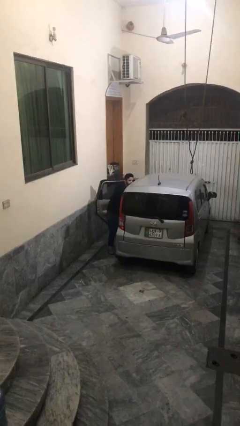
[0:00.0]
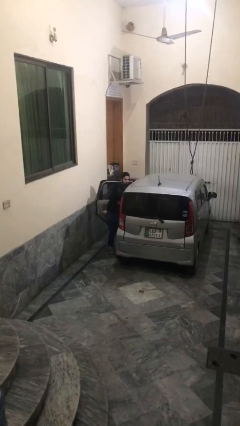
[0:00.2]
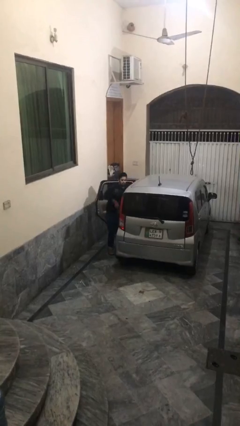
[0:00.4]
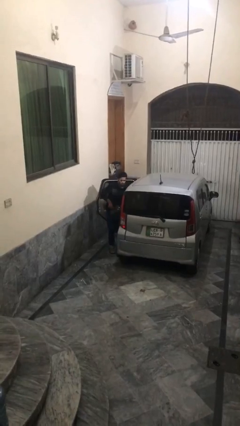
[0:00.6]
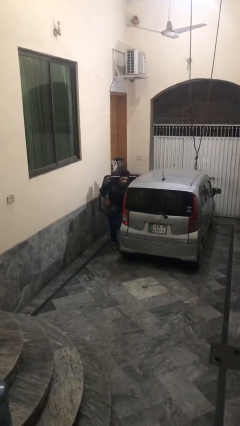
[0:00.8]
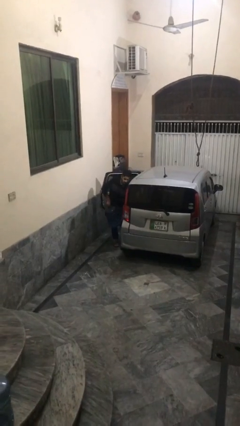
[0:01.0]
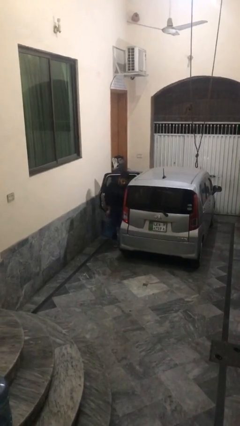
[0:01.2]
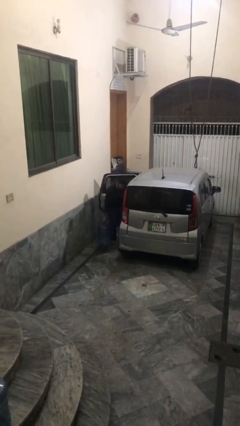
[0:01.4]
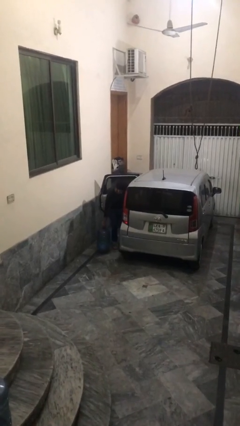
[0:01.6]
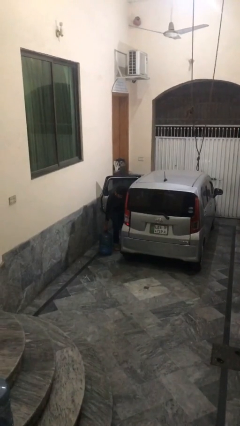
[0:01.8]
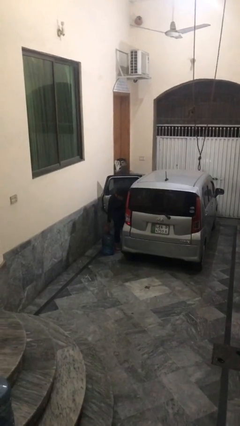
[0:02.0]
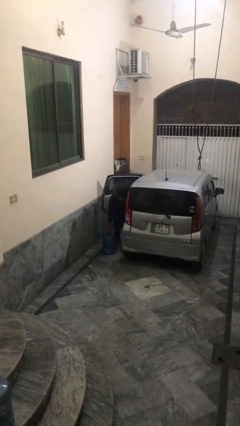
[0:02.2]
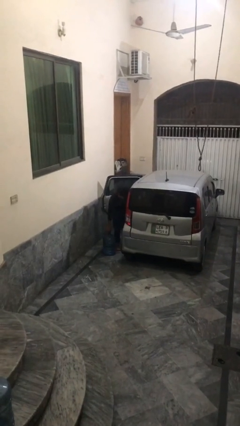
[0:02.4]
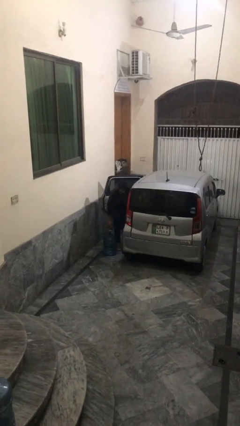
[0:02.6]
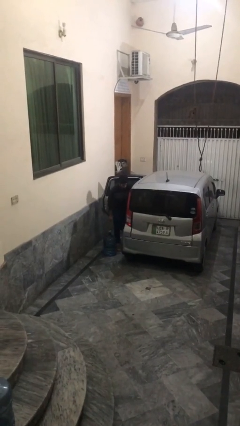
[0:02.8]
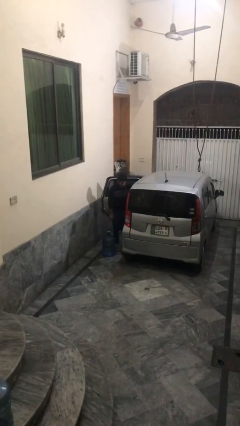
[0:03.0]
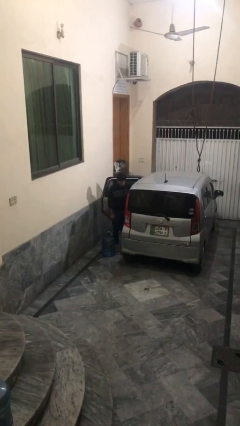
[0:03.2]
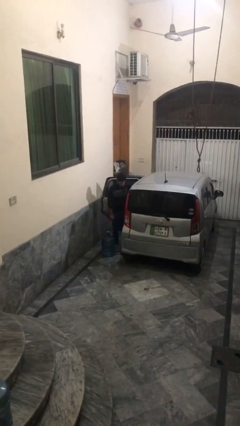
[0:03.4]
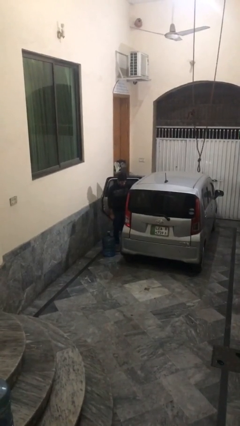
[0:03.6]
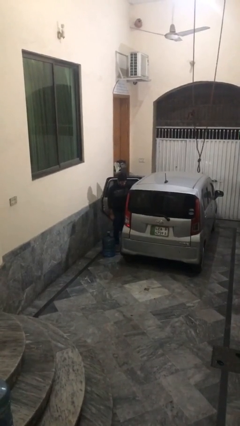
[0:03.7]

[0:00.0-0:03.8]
person unloads car

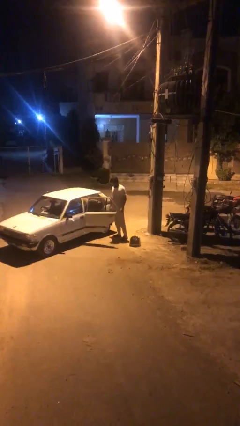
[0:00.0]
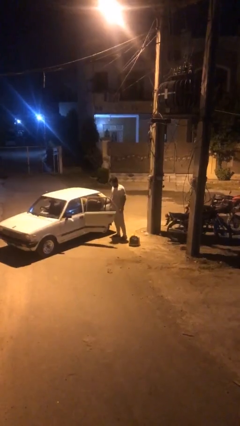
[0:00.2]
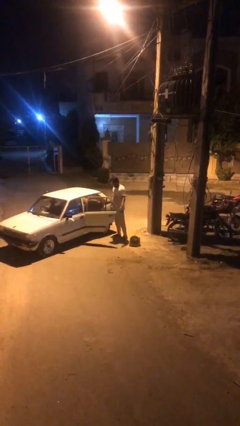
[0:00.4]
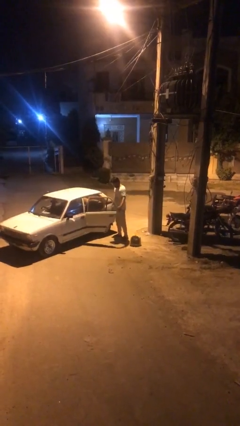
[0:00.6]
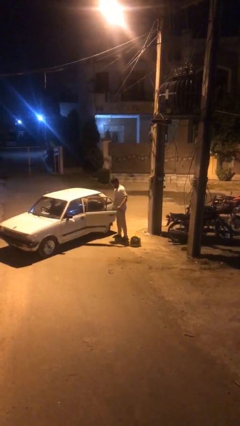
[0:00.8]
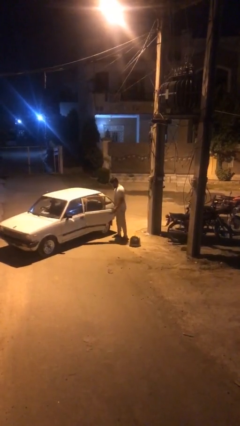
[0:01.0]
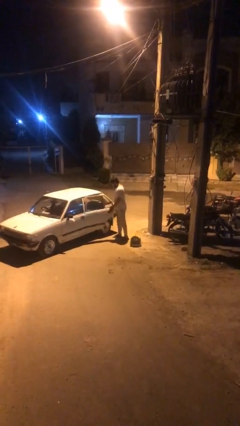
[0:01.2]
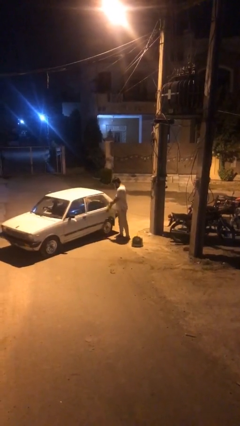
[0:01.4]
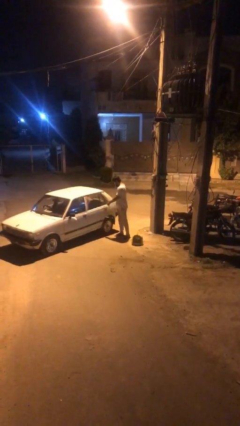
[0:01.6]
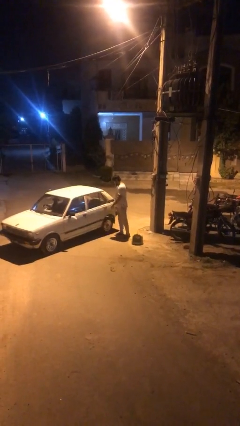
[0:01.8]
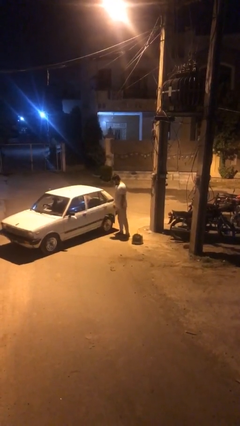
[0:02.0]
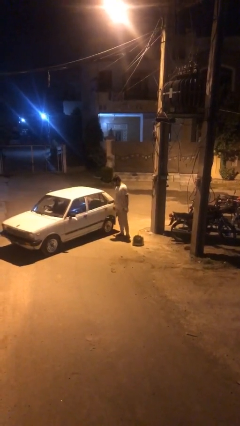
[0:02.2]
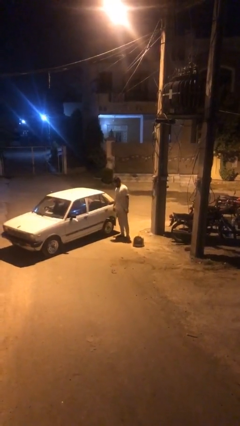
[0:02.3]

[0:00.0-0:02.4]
person closes car door

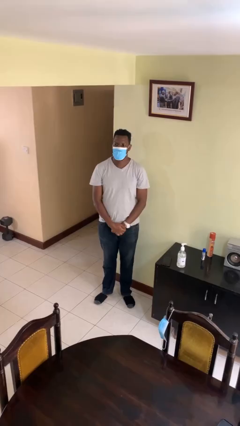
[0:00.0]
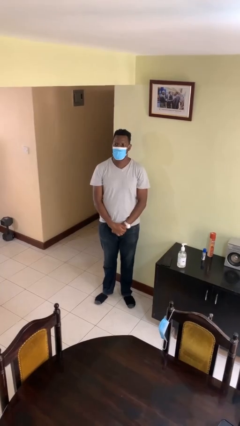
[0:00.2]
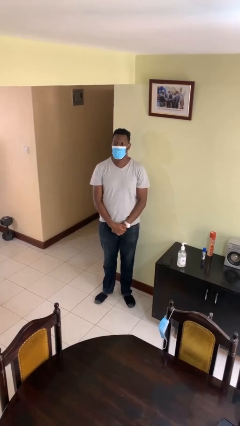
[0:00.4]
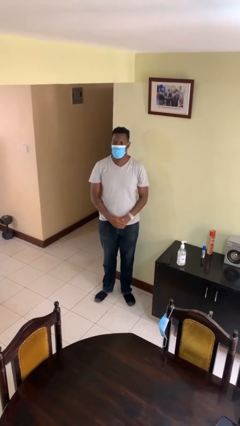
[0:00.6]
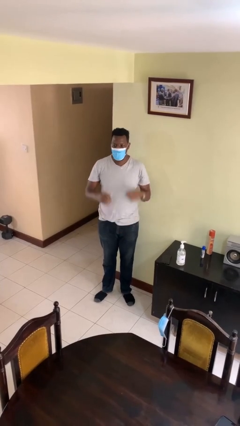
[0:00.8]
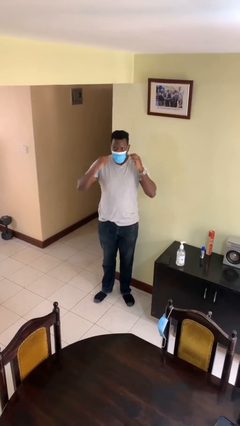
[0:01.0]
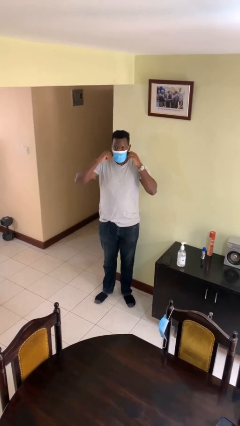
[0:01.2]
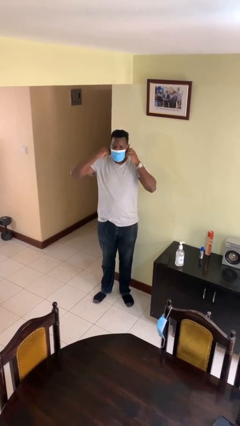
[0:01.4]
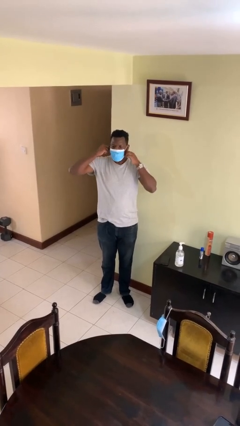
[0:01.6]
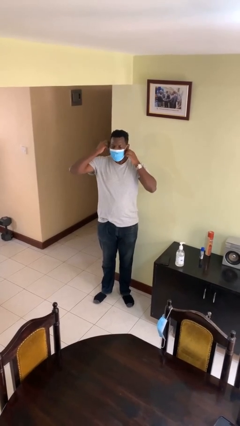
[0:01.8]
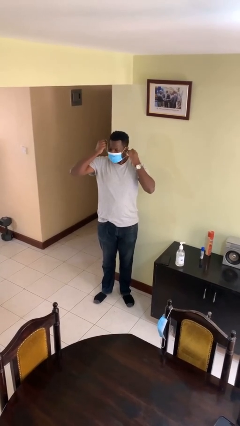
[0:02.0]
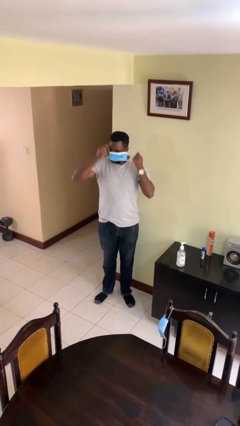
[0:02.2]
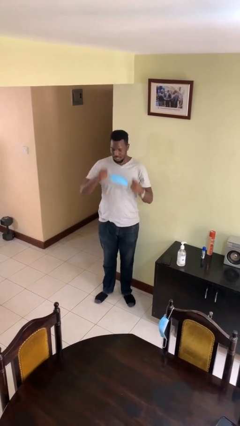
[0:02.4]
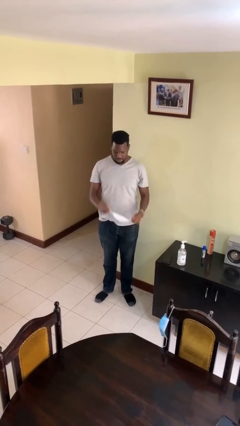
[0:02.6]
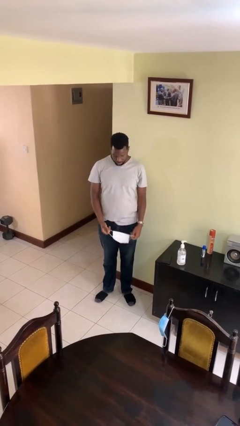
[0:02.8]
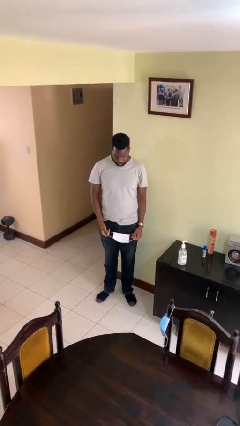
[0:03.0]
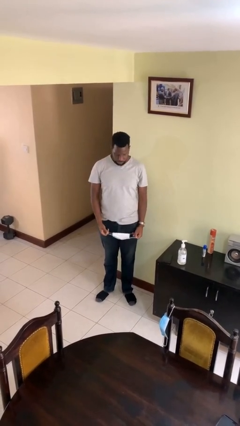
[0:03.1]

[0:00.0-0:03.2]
person takes off facemask

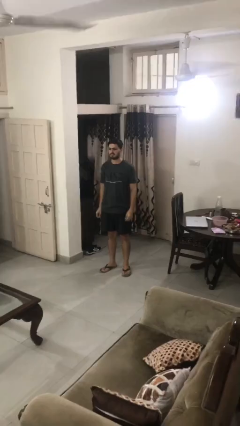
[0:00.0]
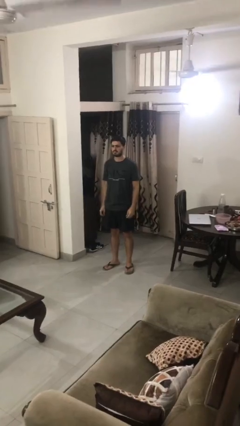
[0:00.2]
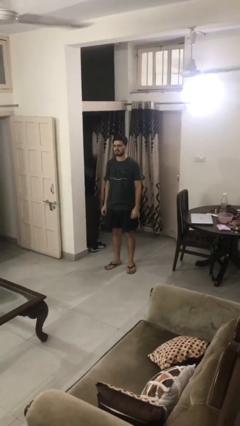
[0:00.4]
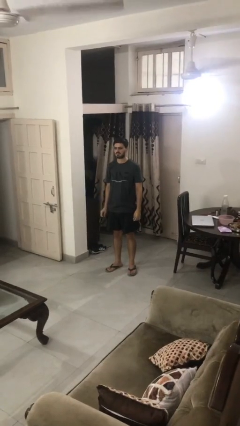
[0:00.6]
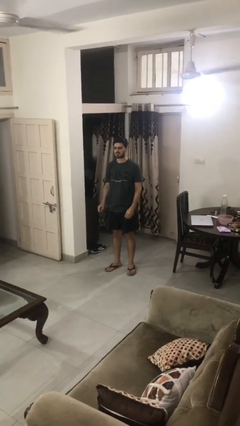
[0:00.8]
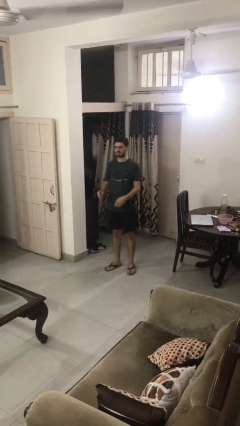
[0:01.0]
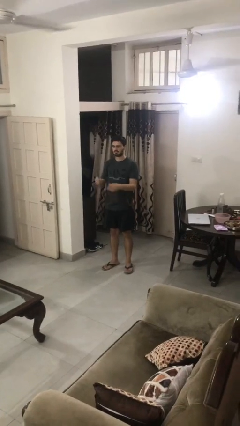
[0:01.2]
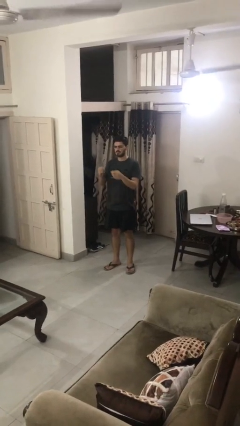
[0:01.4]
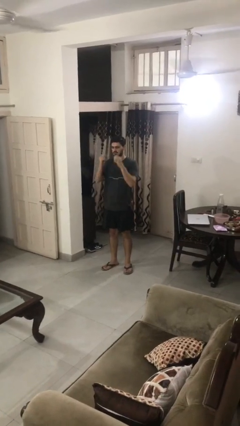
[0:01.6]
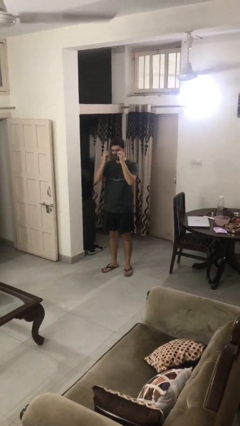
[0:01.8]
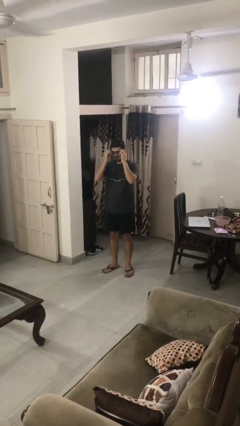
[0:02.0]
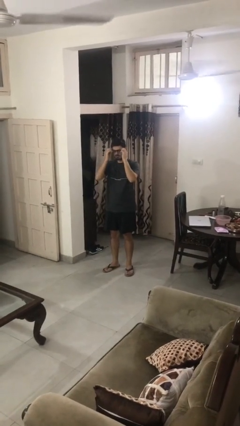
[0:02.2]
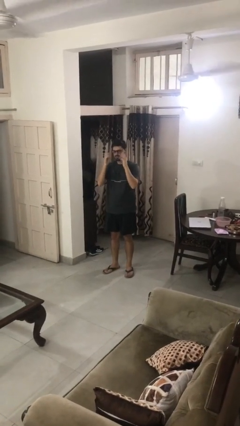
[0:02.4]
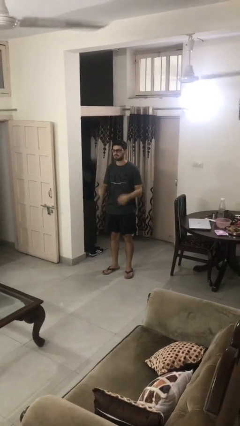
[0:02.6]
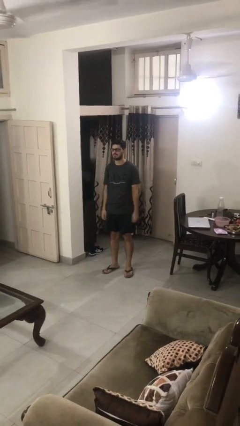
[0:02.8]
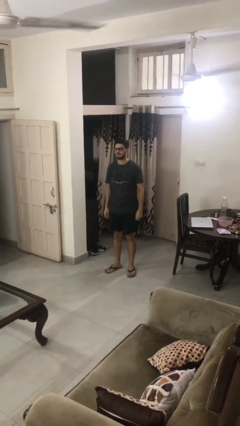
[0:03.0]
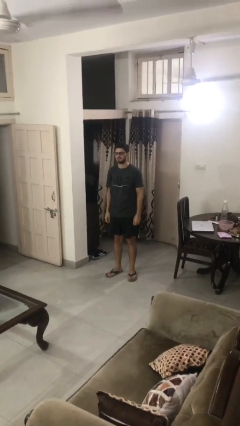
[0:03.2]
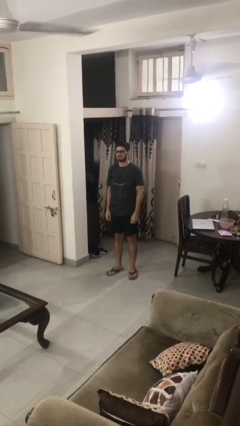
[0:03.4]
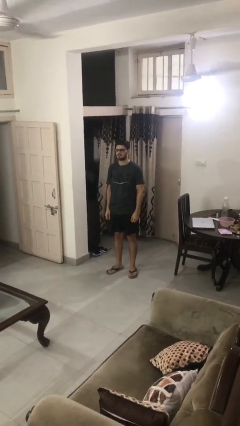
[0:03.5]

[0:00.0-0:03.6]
person puts on glasses

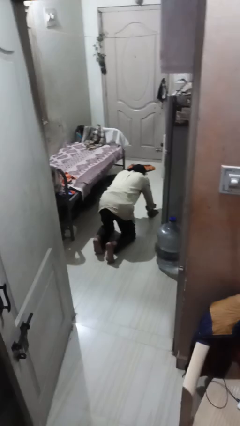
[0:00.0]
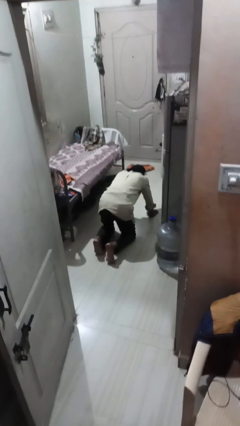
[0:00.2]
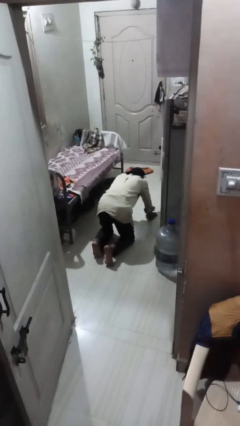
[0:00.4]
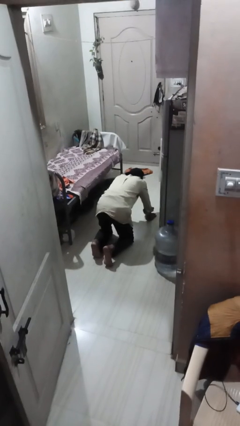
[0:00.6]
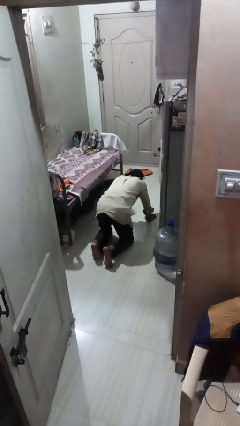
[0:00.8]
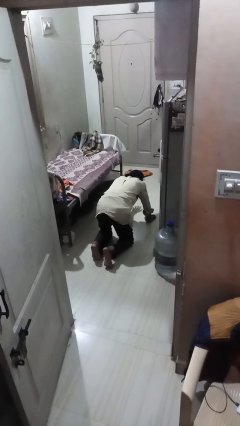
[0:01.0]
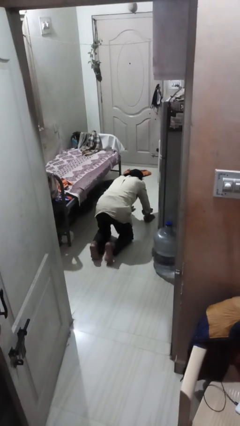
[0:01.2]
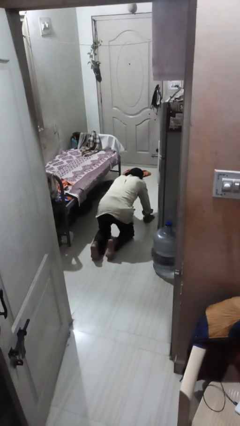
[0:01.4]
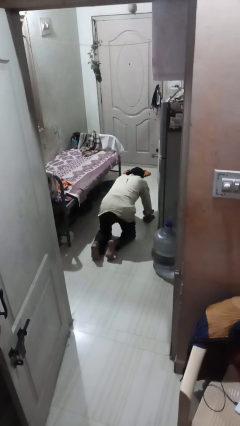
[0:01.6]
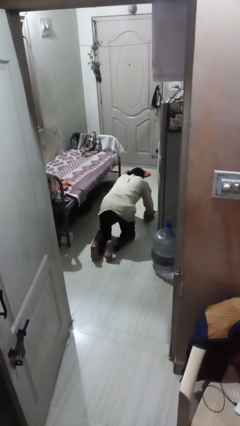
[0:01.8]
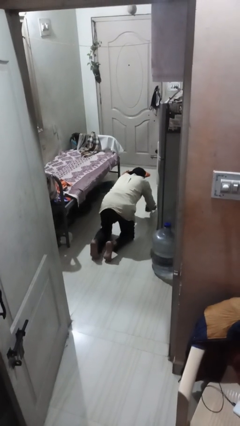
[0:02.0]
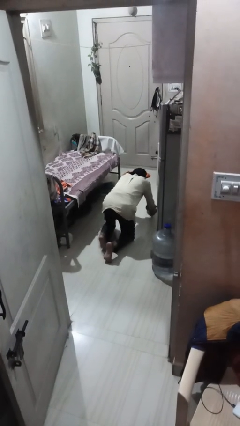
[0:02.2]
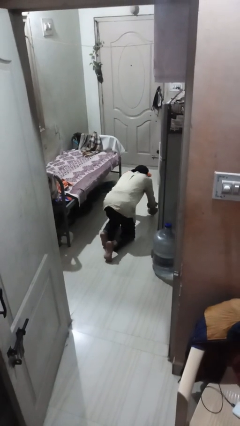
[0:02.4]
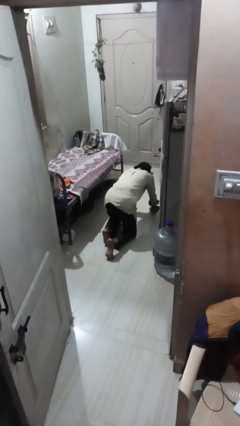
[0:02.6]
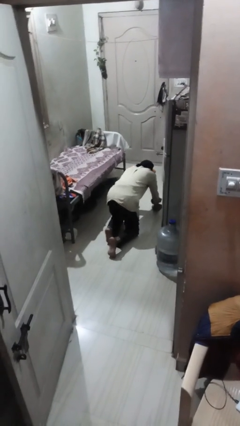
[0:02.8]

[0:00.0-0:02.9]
person crawls

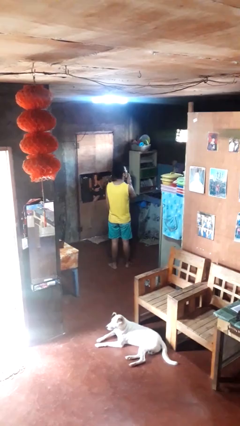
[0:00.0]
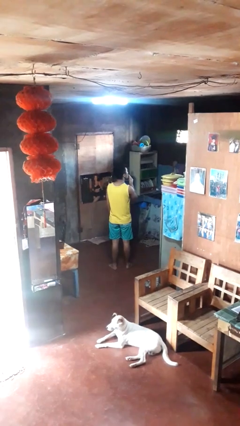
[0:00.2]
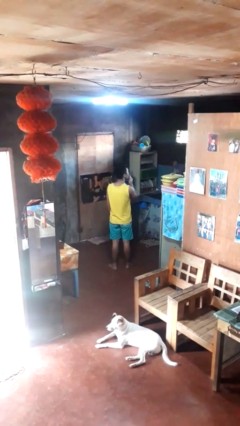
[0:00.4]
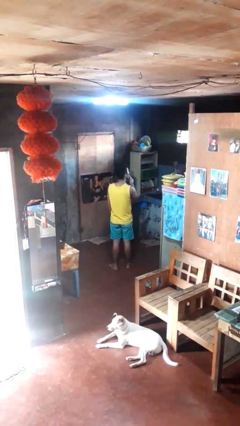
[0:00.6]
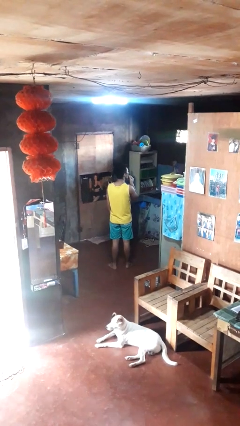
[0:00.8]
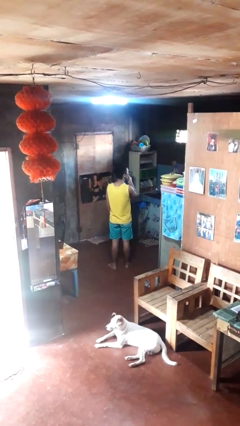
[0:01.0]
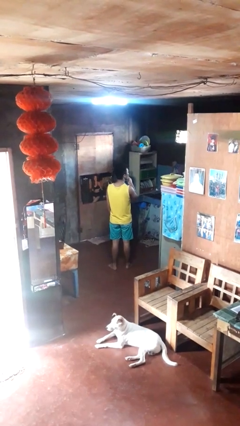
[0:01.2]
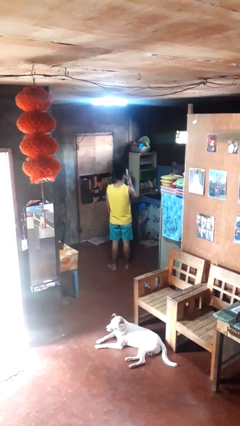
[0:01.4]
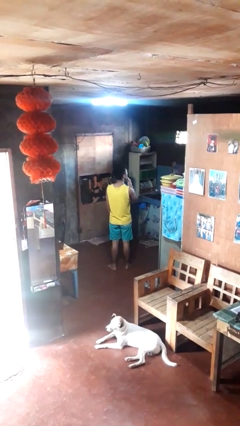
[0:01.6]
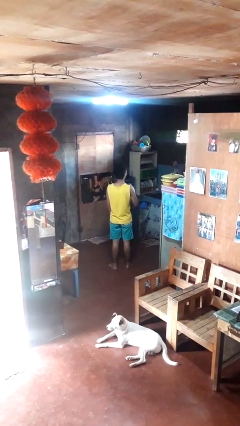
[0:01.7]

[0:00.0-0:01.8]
person licks fingers
